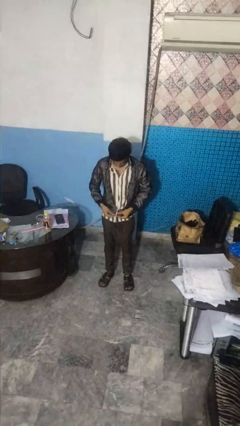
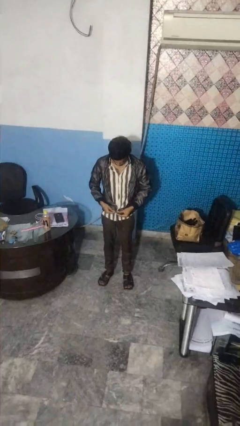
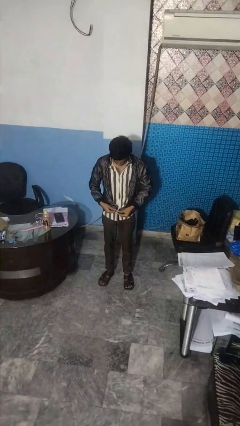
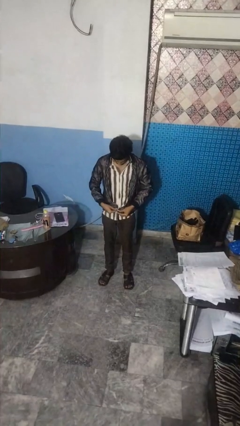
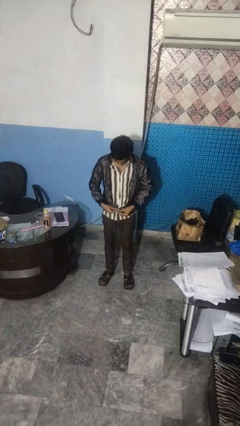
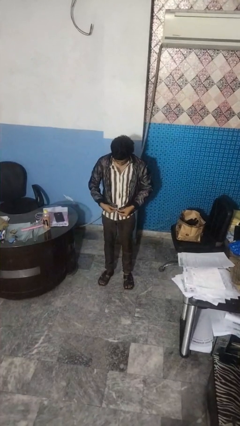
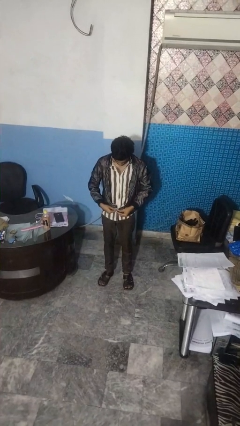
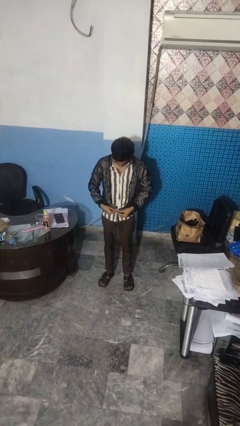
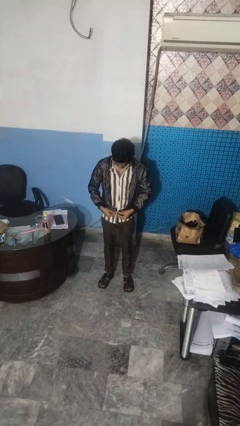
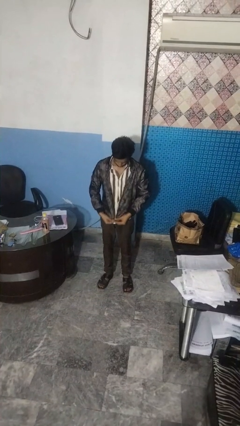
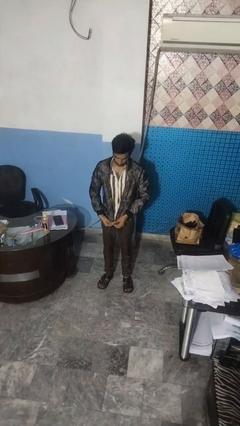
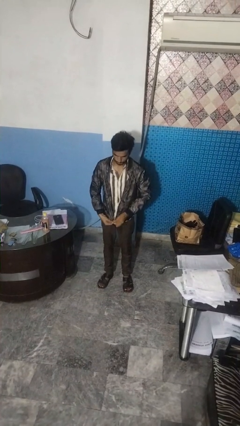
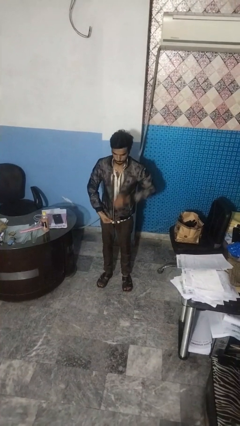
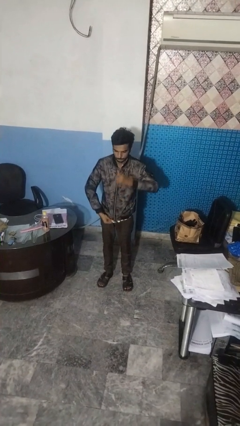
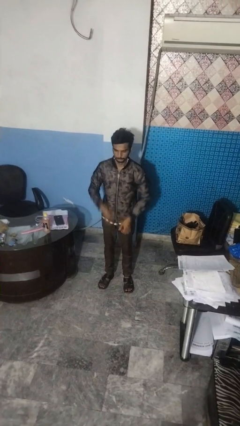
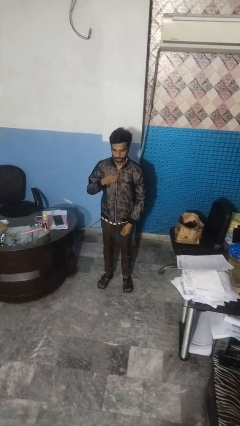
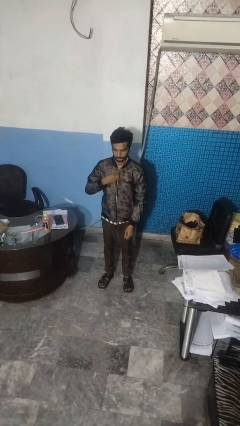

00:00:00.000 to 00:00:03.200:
person zips up jacket

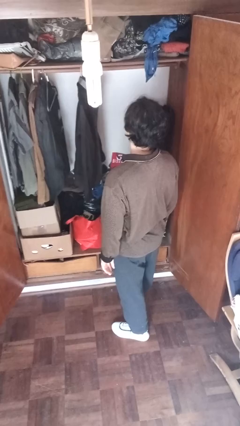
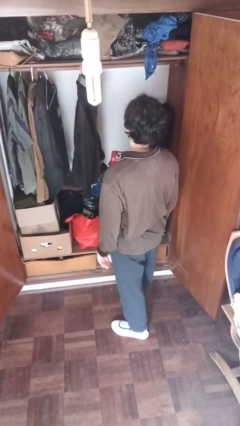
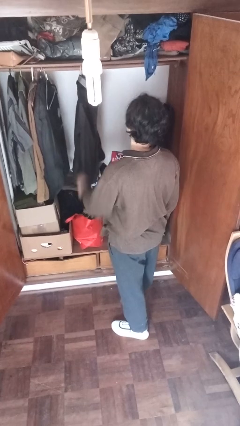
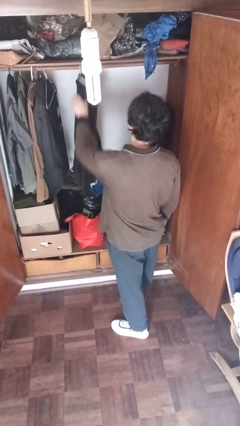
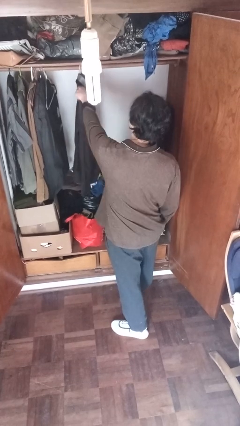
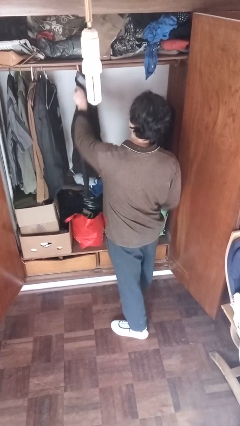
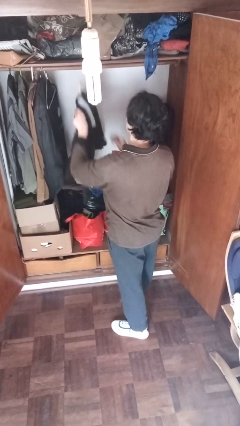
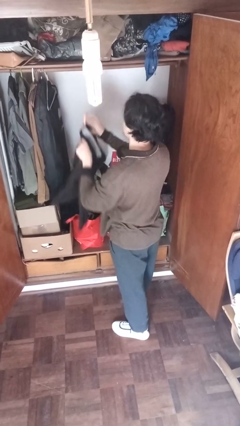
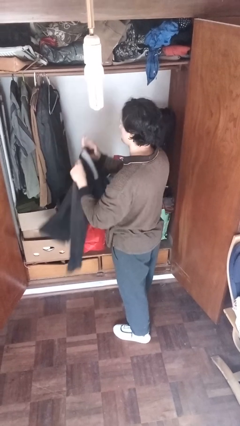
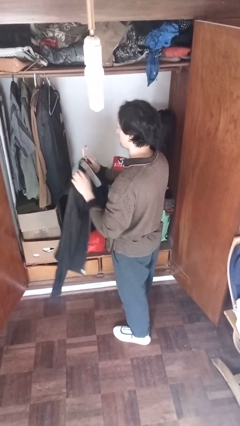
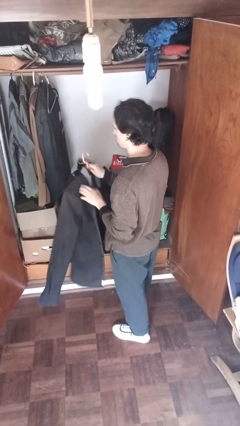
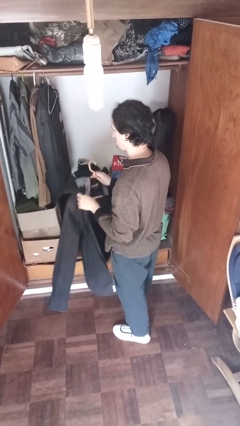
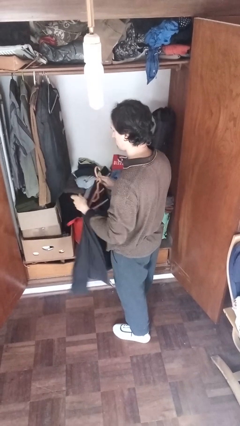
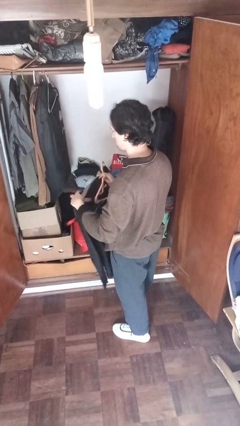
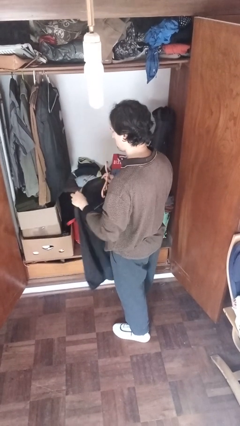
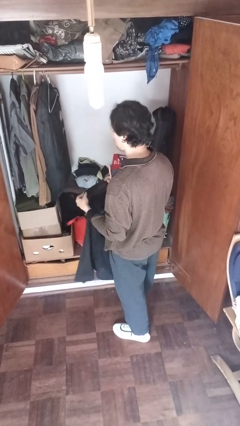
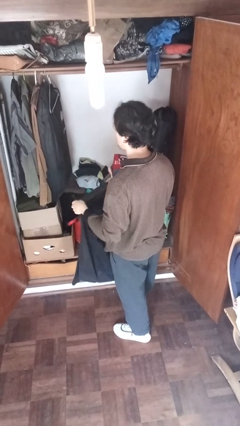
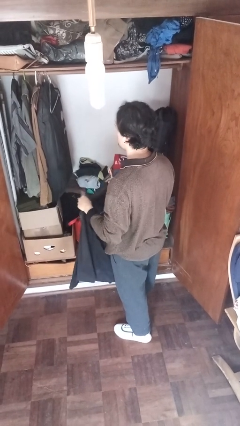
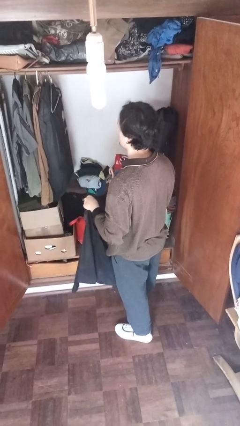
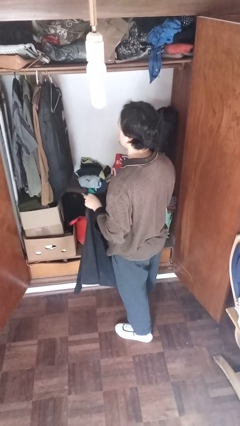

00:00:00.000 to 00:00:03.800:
person takes clothes from closet

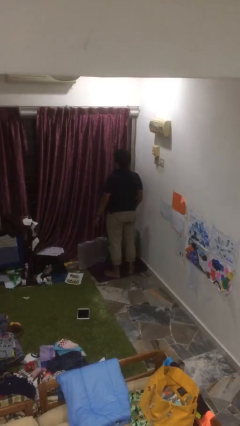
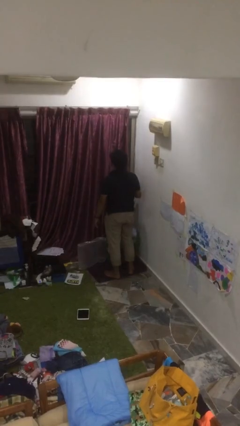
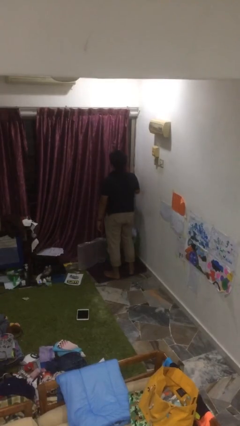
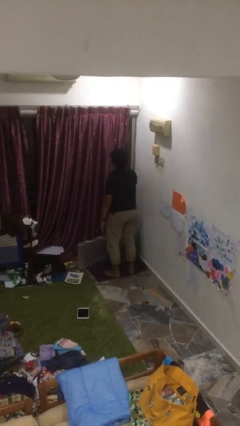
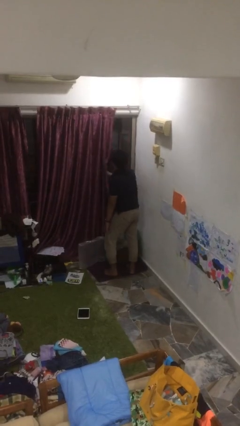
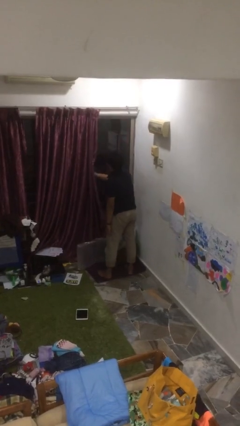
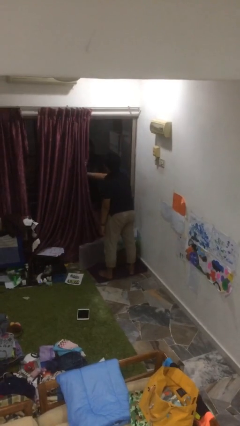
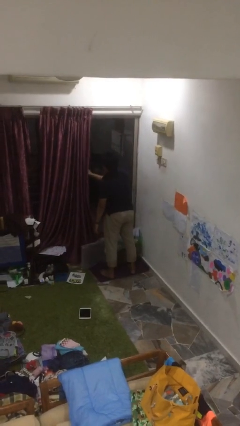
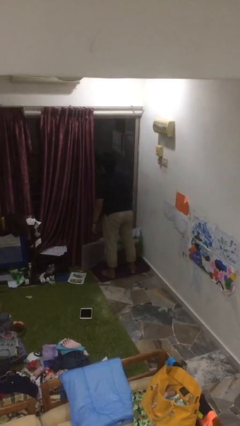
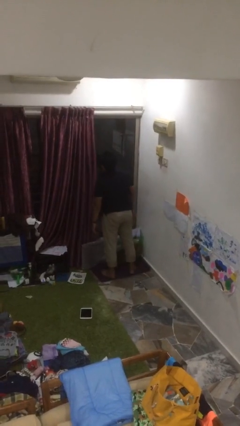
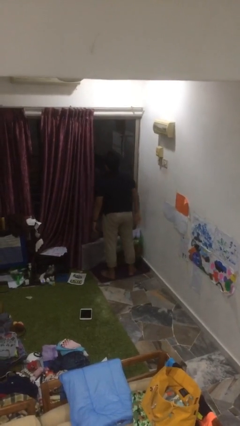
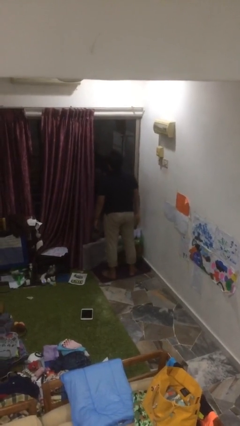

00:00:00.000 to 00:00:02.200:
person opens curtains

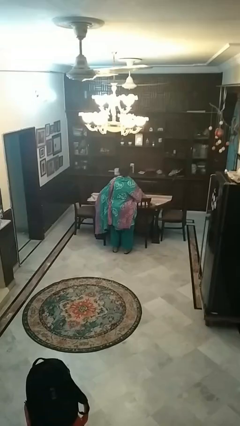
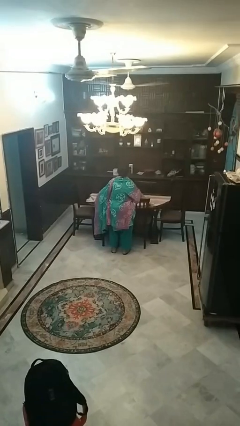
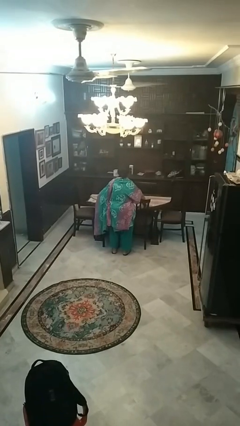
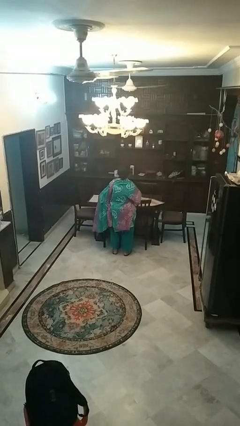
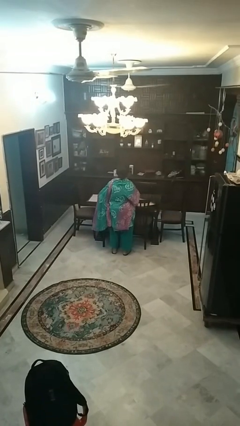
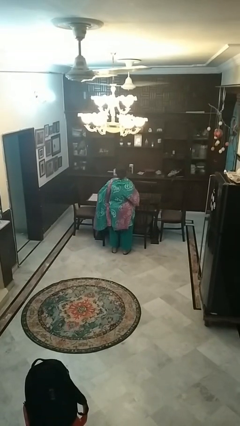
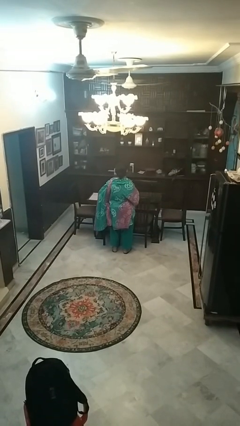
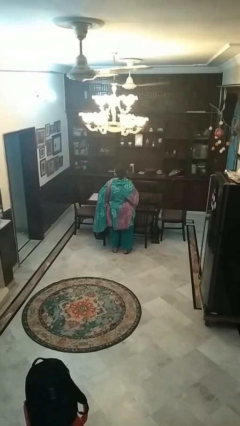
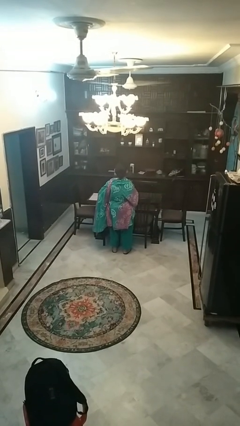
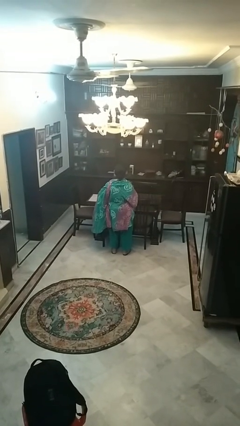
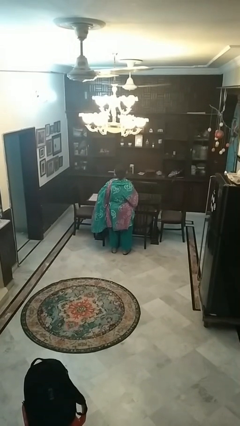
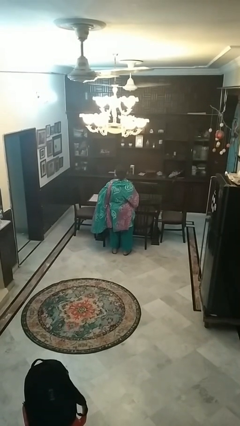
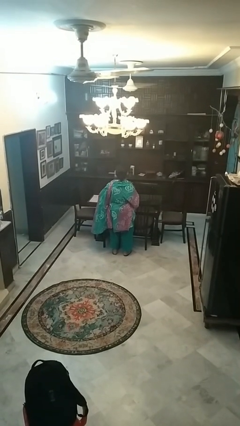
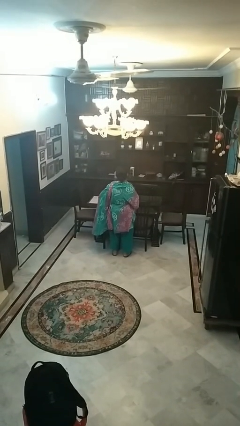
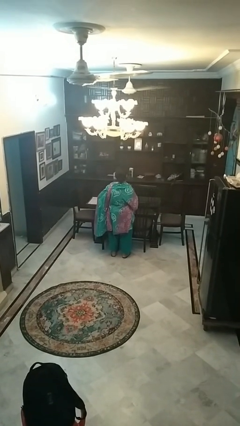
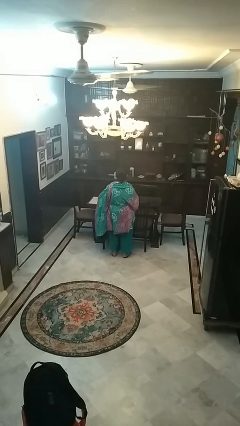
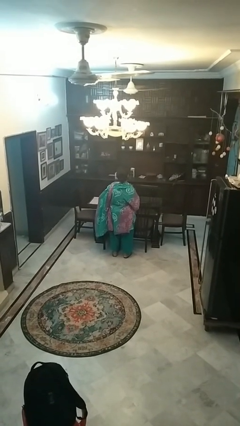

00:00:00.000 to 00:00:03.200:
person folds tablecloth

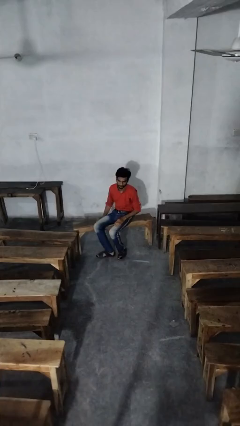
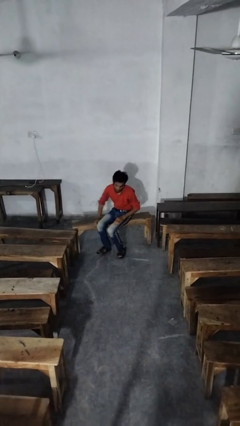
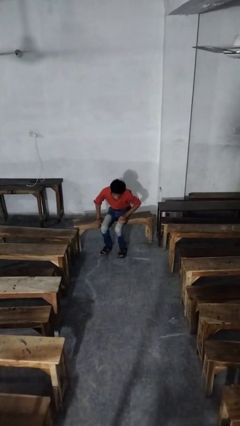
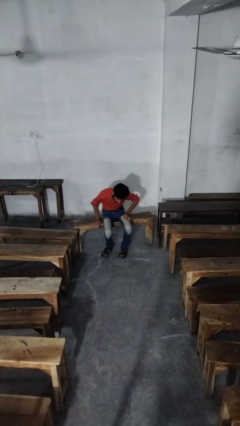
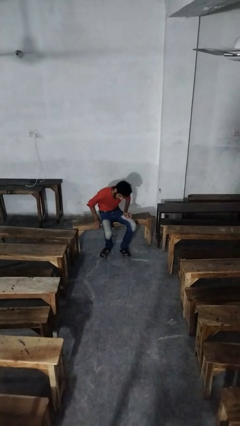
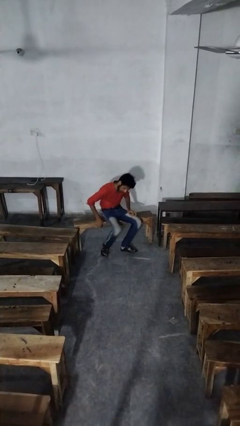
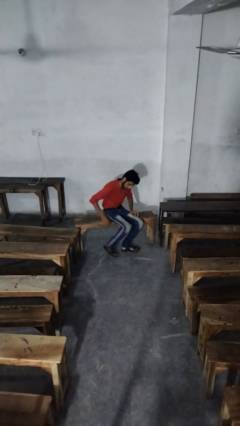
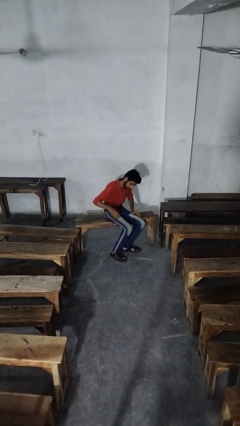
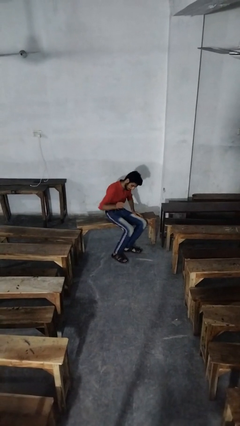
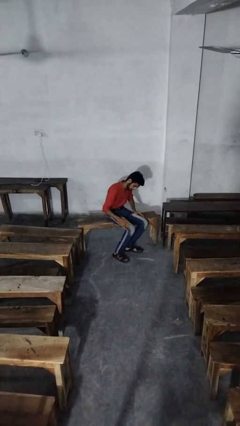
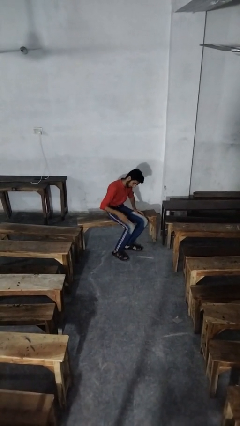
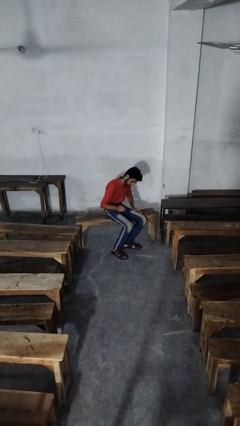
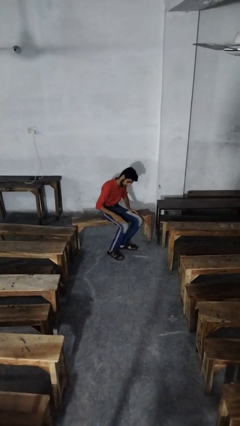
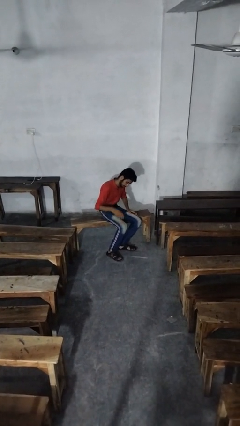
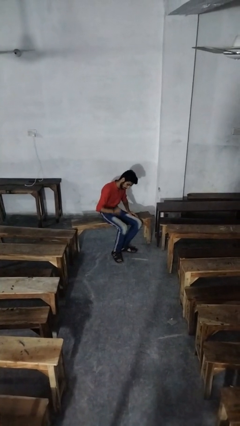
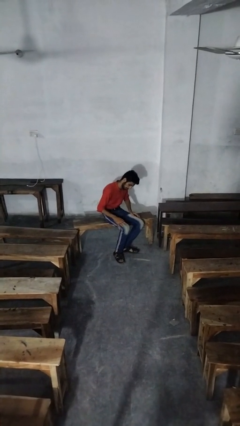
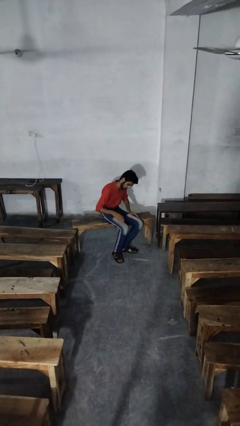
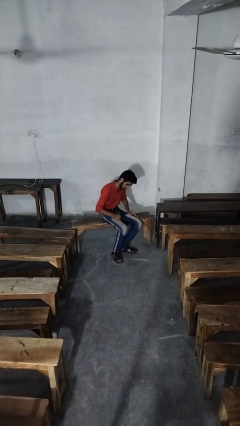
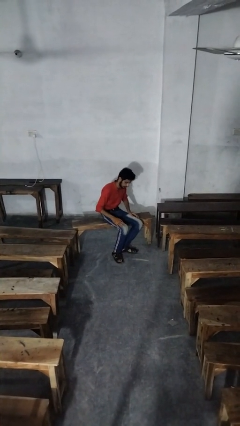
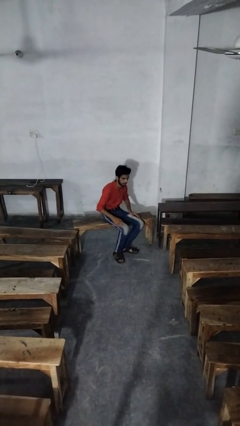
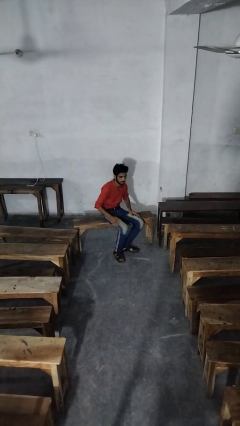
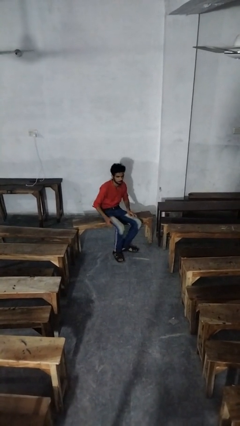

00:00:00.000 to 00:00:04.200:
person slaps hands on thighs

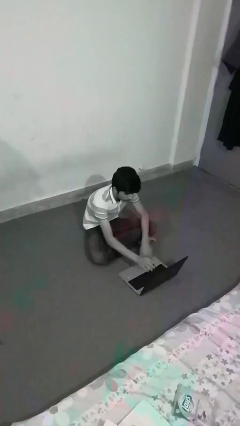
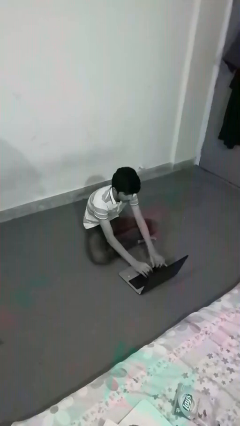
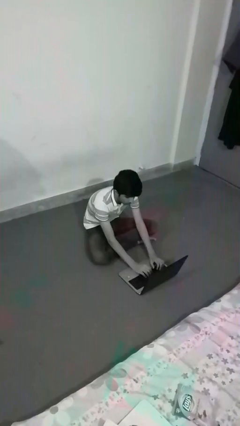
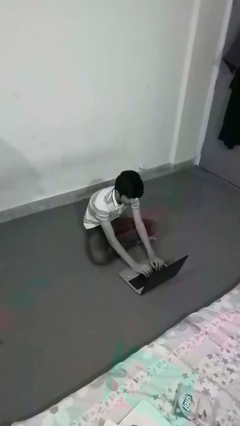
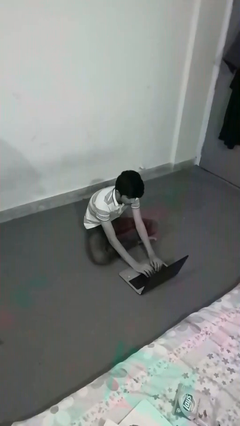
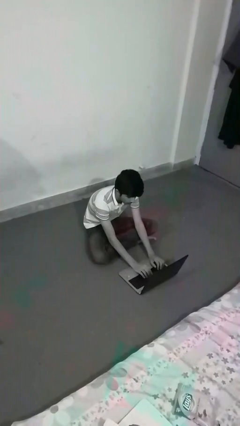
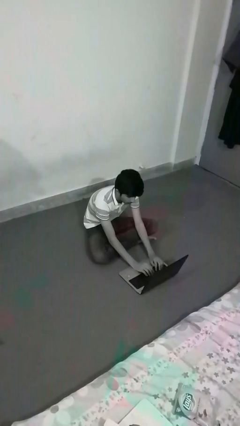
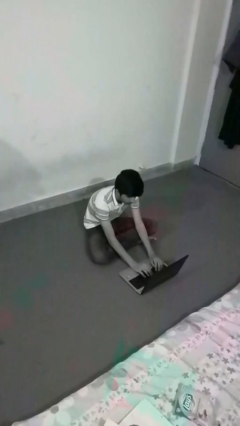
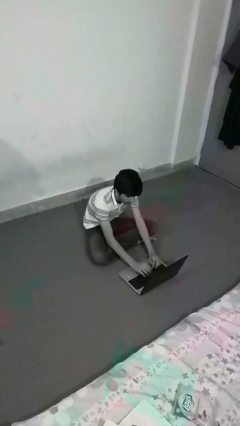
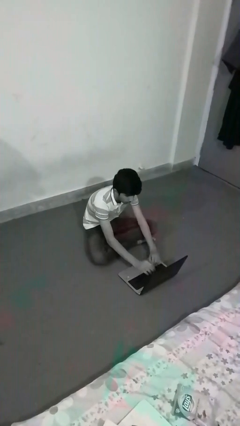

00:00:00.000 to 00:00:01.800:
person interacts with laptop
